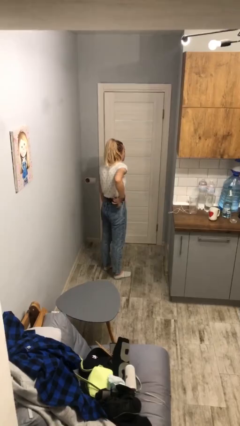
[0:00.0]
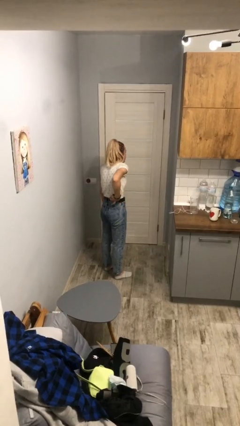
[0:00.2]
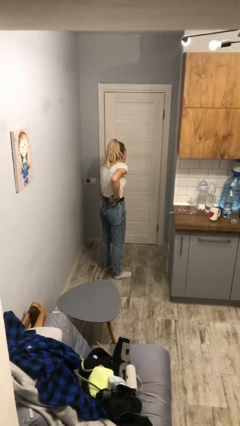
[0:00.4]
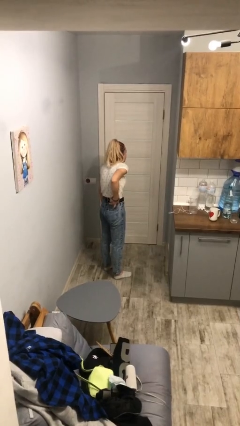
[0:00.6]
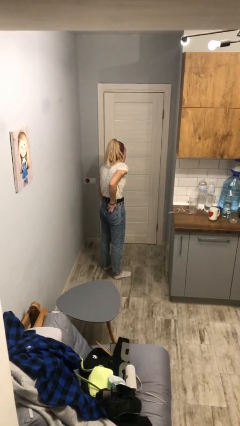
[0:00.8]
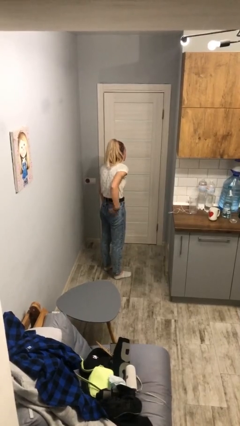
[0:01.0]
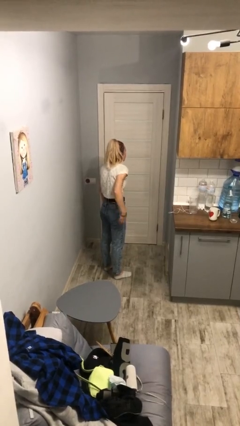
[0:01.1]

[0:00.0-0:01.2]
person puts phone into pocket

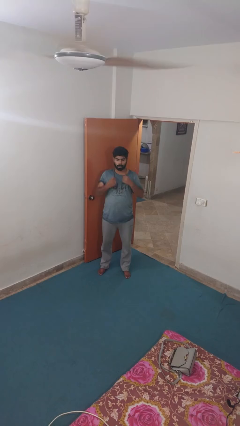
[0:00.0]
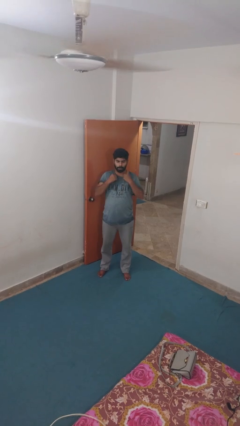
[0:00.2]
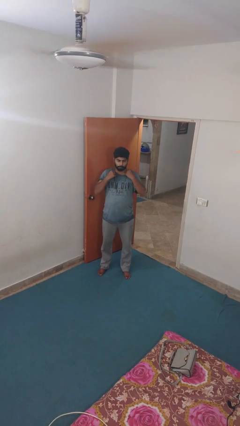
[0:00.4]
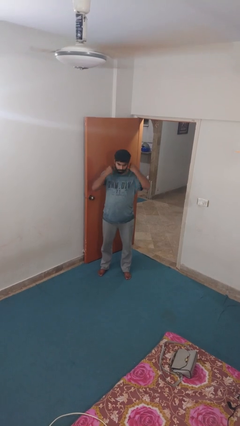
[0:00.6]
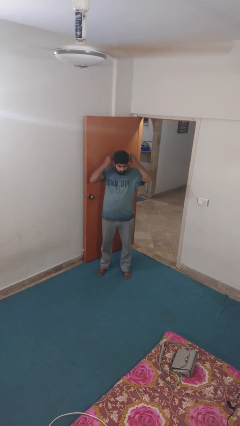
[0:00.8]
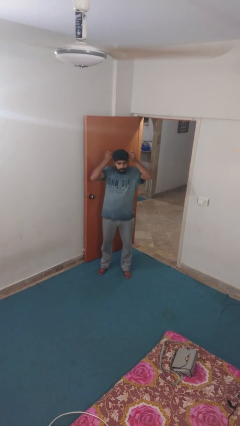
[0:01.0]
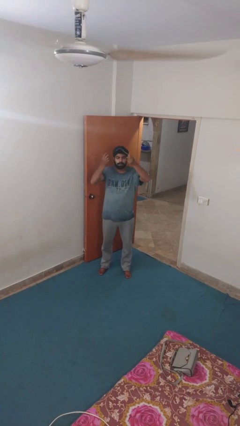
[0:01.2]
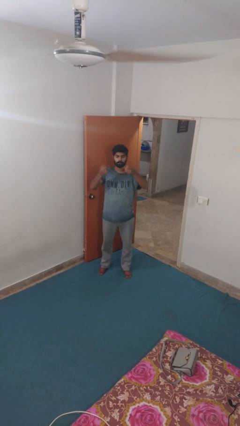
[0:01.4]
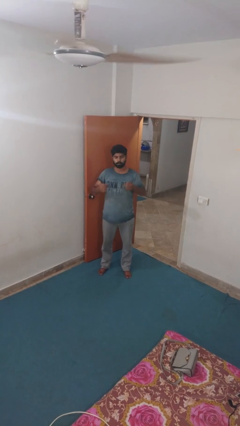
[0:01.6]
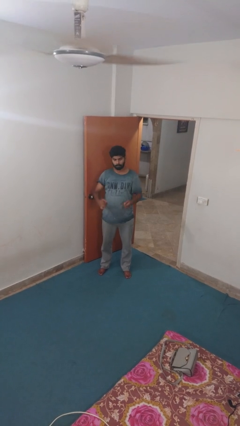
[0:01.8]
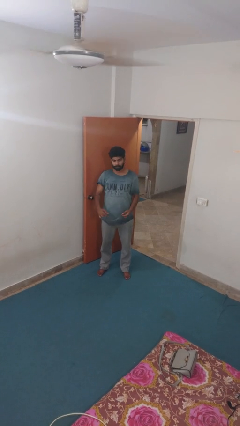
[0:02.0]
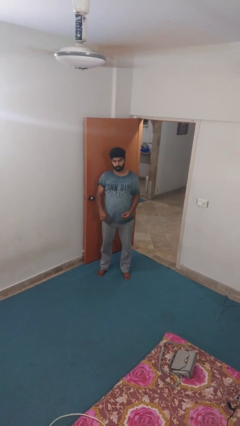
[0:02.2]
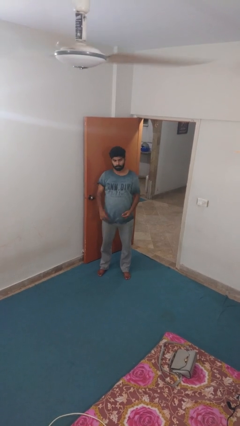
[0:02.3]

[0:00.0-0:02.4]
person takes off necklace

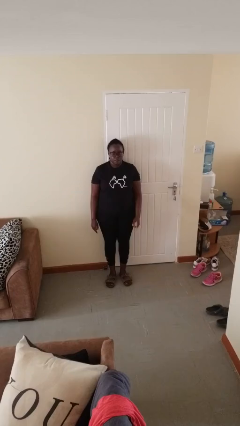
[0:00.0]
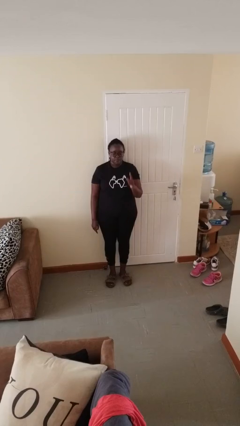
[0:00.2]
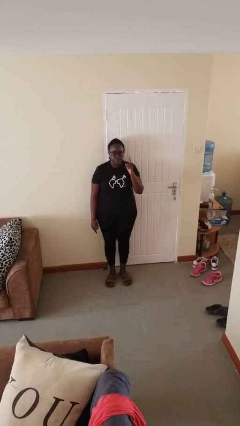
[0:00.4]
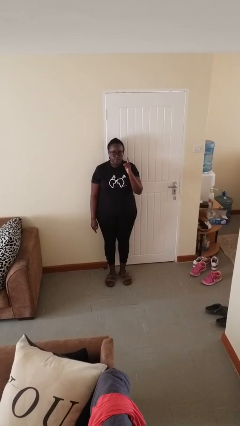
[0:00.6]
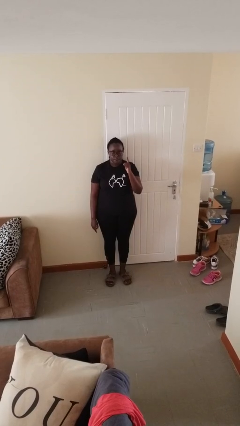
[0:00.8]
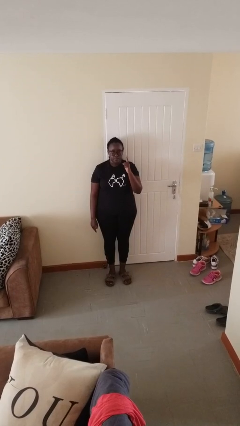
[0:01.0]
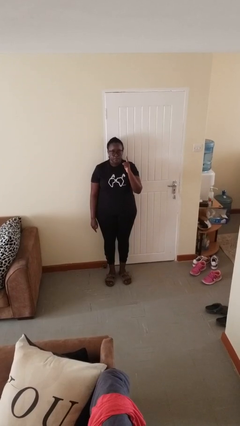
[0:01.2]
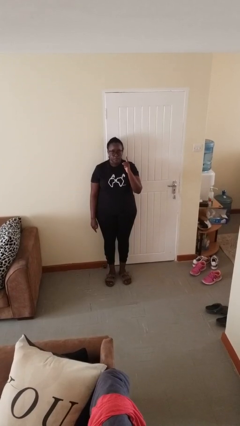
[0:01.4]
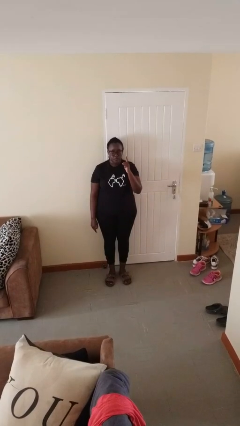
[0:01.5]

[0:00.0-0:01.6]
person gestures number one

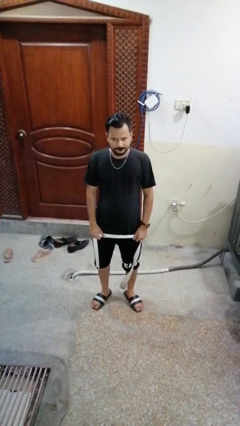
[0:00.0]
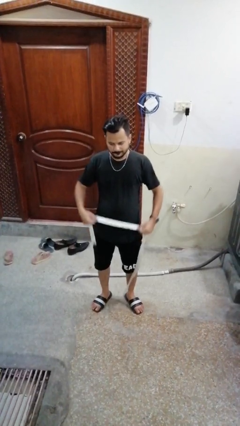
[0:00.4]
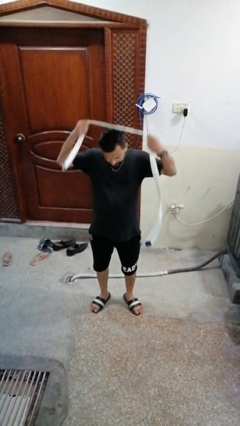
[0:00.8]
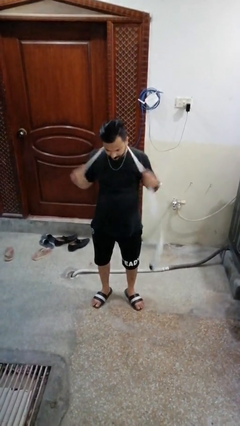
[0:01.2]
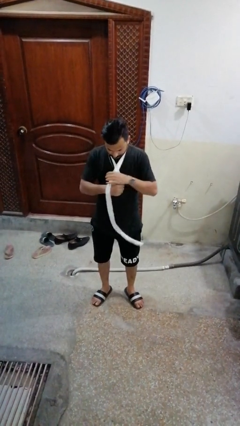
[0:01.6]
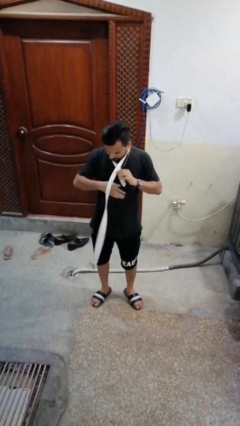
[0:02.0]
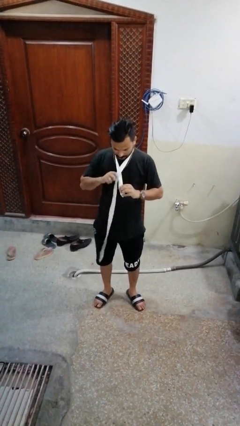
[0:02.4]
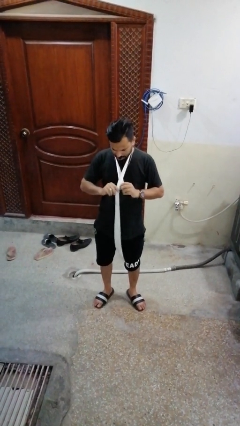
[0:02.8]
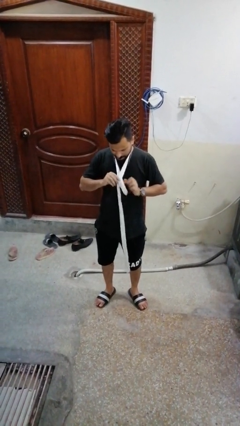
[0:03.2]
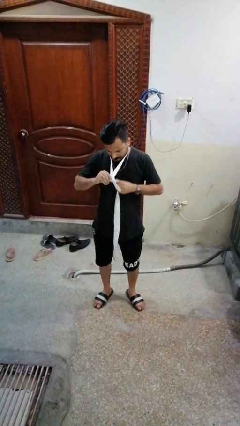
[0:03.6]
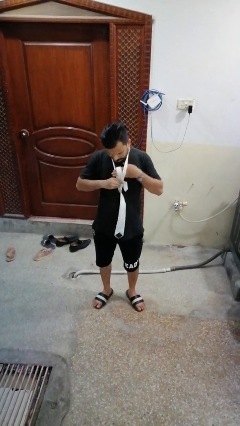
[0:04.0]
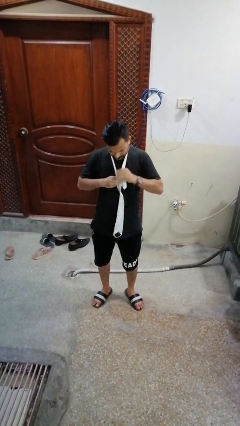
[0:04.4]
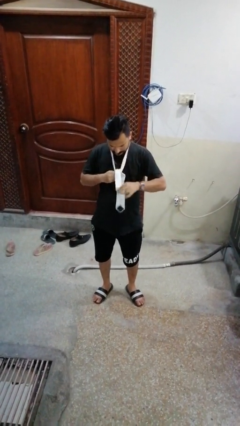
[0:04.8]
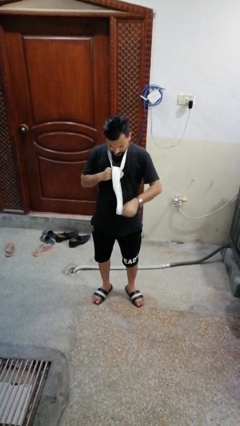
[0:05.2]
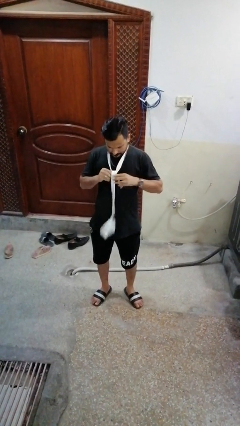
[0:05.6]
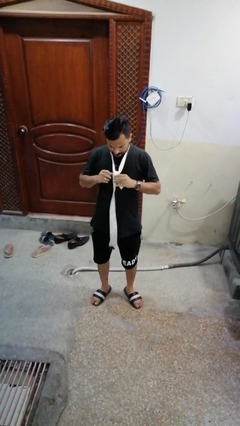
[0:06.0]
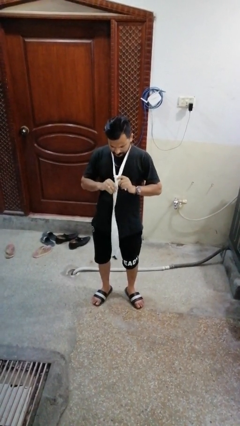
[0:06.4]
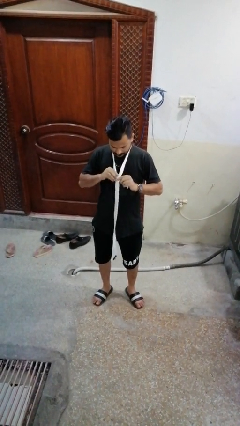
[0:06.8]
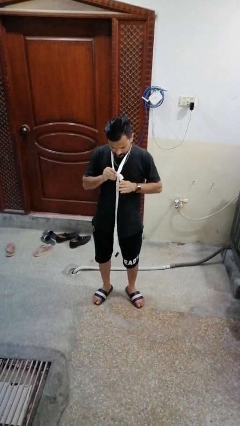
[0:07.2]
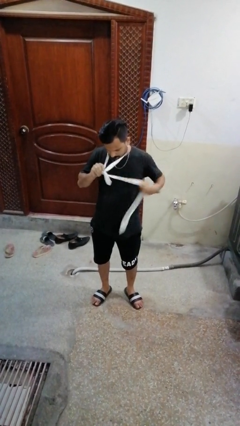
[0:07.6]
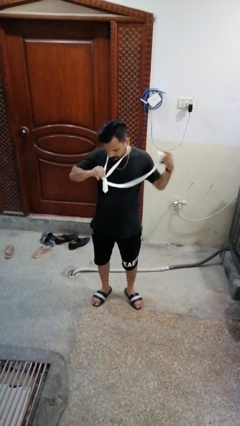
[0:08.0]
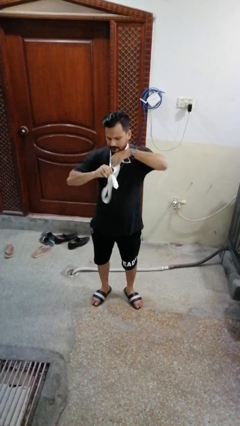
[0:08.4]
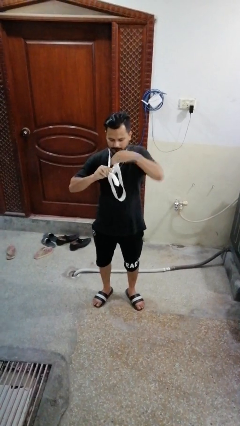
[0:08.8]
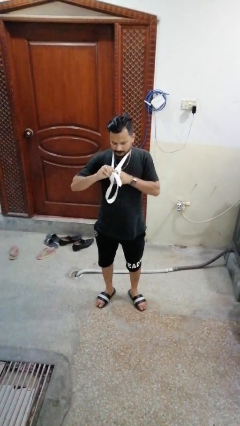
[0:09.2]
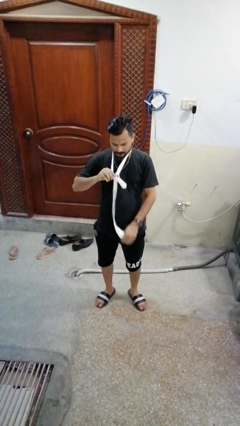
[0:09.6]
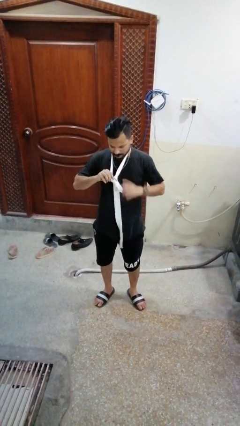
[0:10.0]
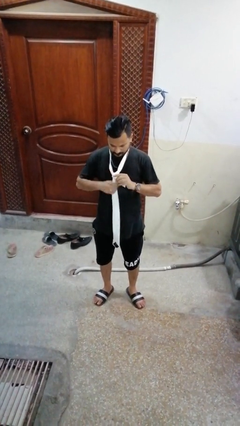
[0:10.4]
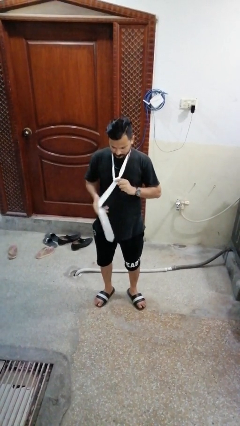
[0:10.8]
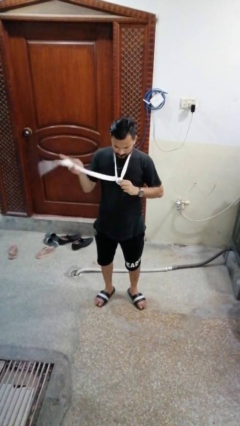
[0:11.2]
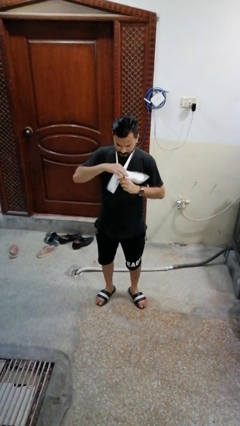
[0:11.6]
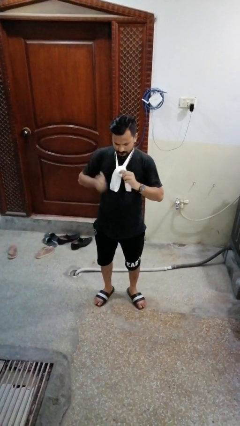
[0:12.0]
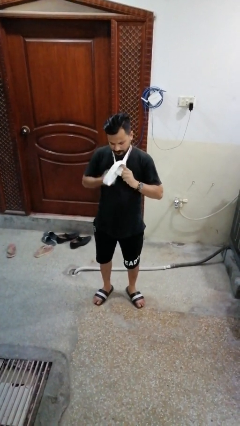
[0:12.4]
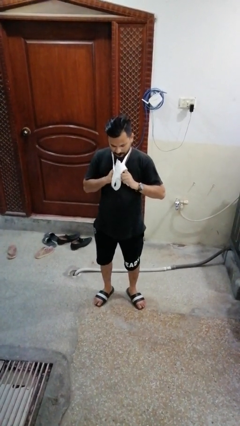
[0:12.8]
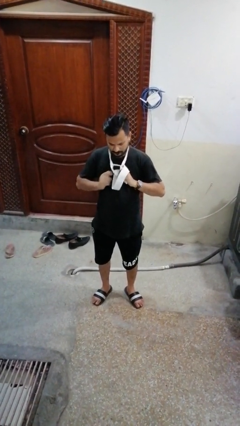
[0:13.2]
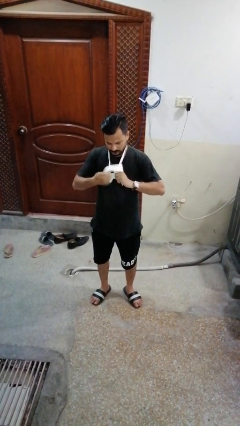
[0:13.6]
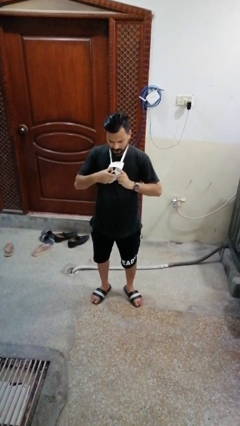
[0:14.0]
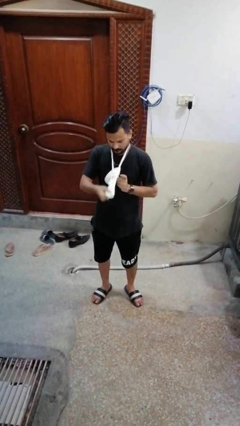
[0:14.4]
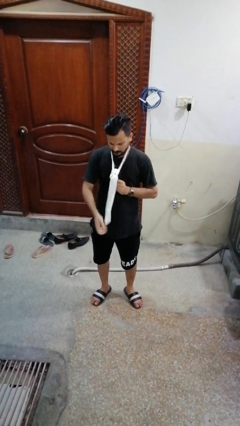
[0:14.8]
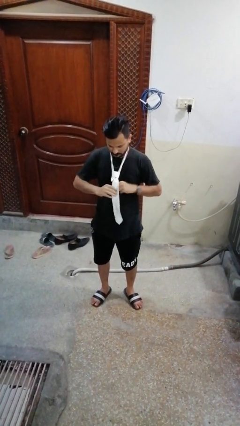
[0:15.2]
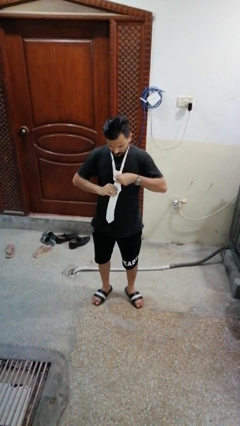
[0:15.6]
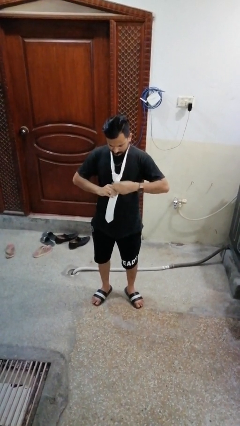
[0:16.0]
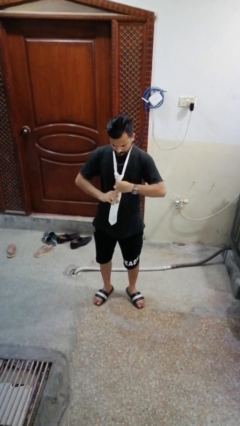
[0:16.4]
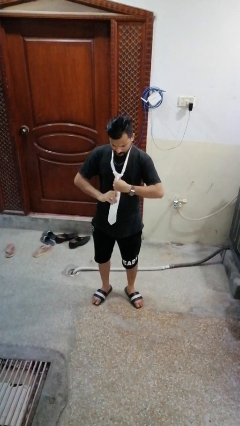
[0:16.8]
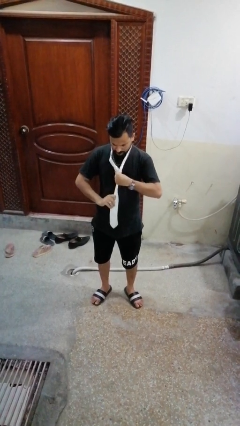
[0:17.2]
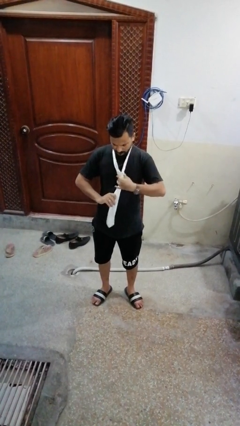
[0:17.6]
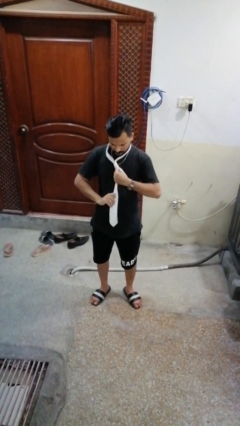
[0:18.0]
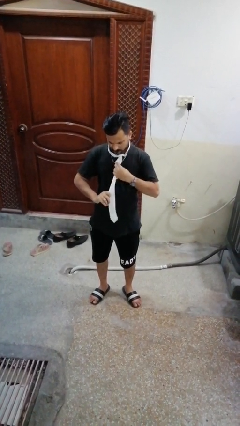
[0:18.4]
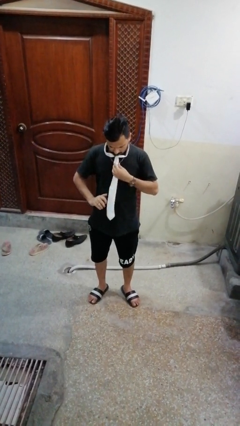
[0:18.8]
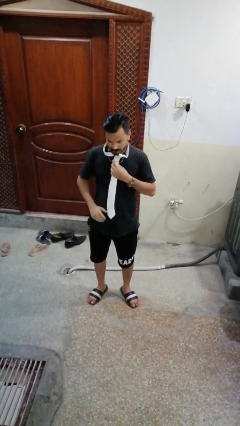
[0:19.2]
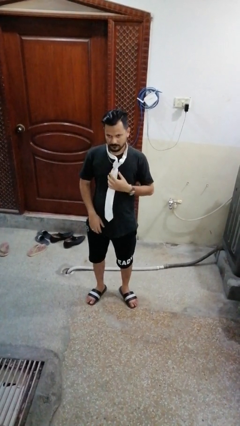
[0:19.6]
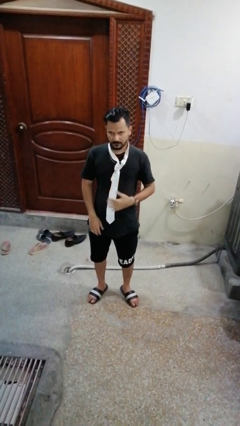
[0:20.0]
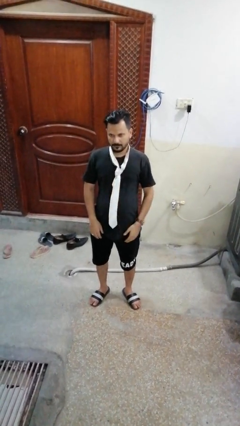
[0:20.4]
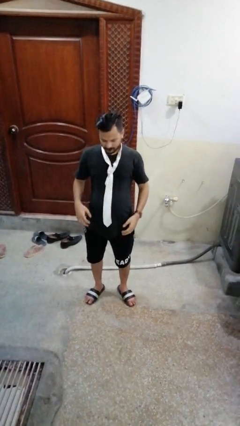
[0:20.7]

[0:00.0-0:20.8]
person puts on necktie

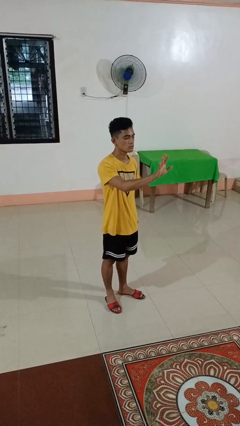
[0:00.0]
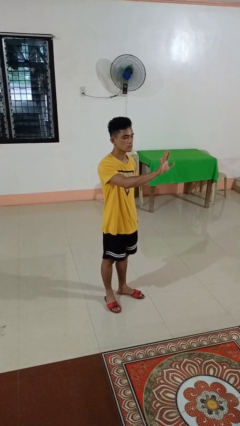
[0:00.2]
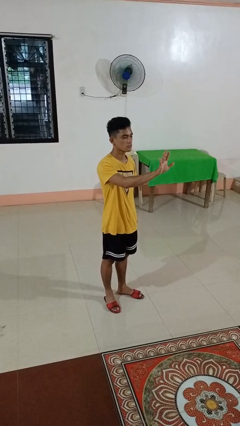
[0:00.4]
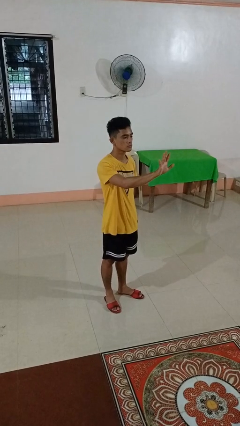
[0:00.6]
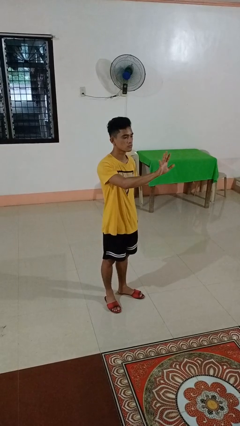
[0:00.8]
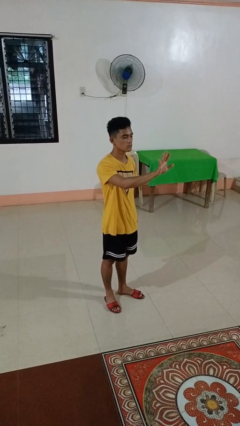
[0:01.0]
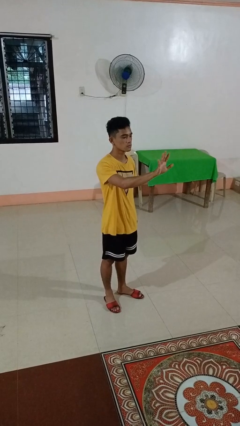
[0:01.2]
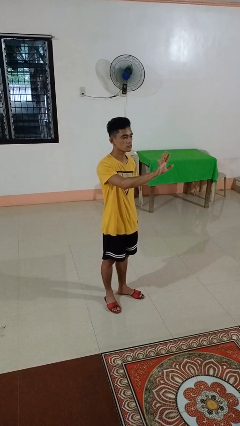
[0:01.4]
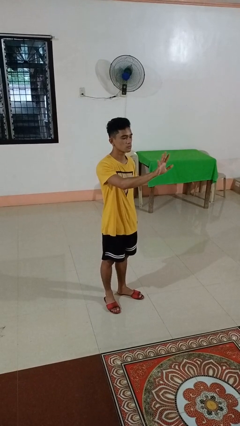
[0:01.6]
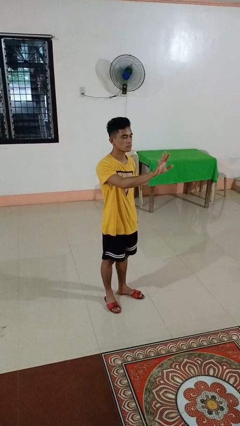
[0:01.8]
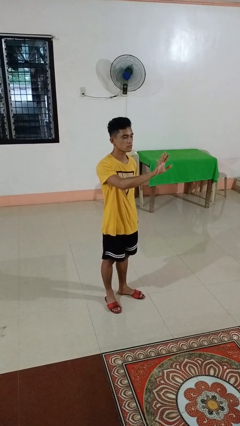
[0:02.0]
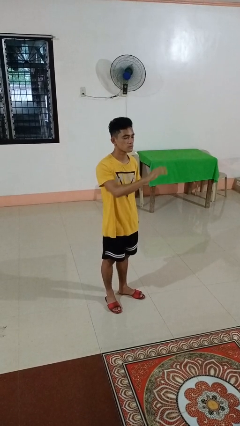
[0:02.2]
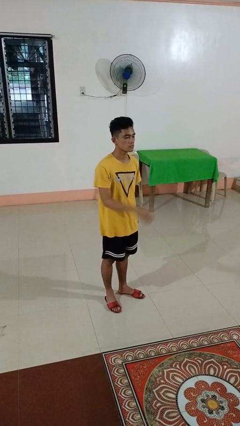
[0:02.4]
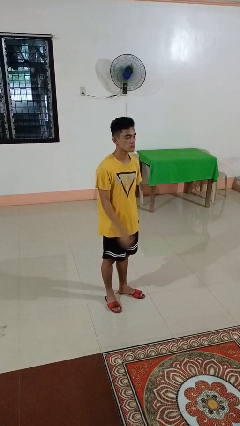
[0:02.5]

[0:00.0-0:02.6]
person gestures number five
